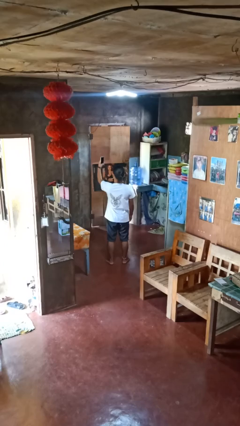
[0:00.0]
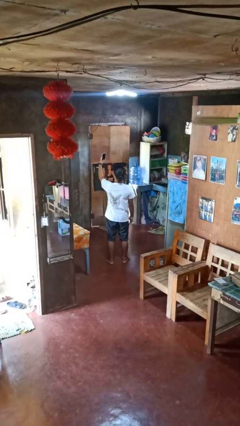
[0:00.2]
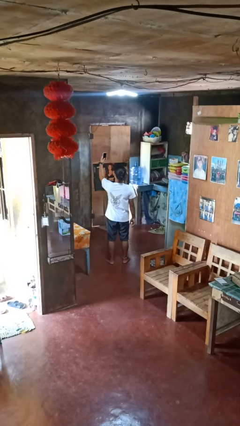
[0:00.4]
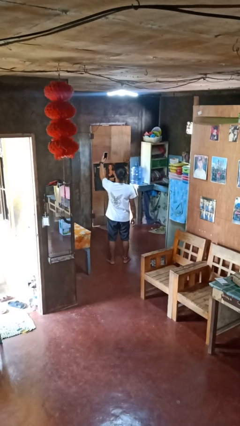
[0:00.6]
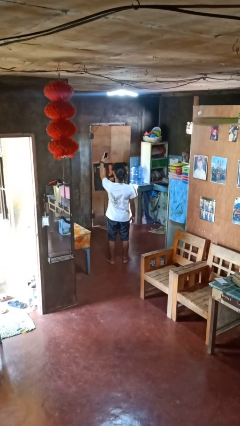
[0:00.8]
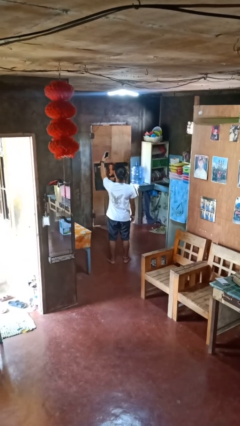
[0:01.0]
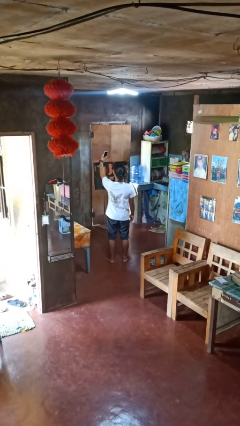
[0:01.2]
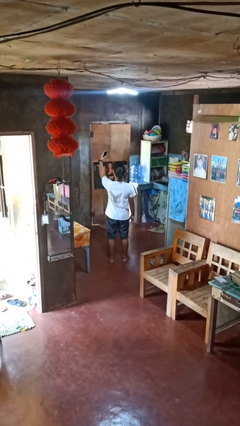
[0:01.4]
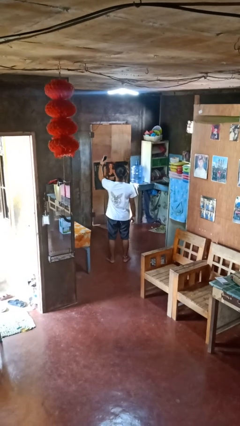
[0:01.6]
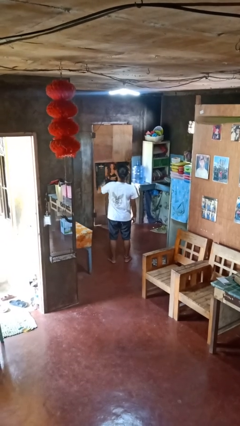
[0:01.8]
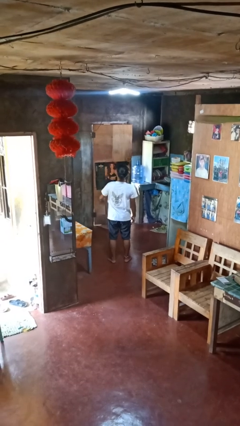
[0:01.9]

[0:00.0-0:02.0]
person takes selfie

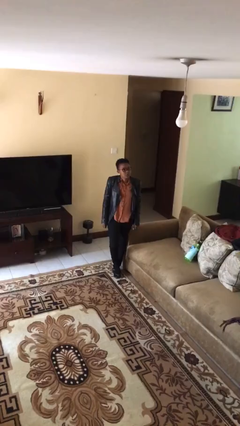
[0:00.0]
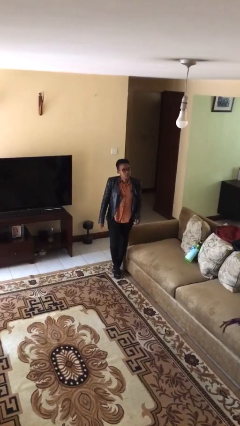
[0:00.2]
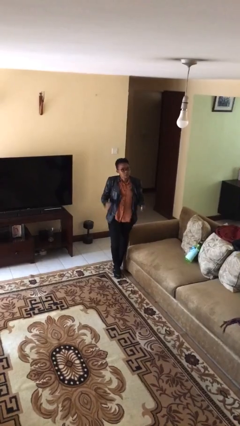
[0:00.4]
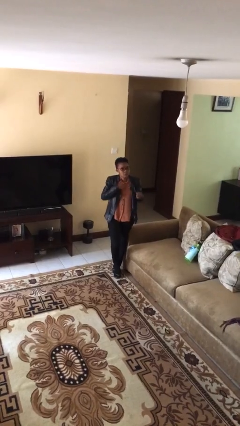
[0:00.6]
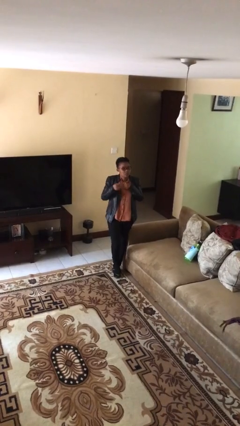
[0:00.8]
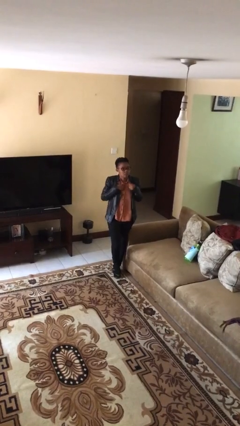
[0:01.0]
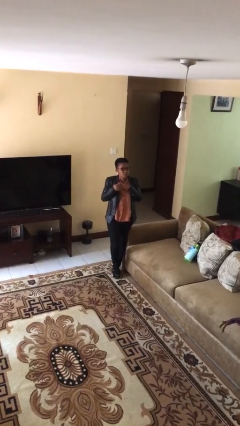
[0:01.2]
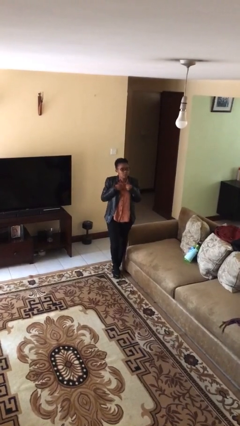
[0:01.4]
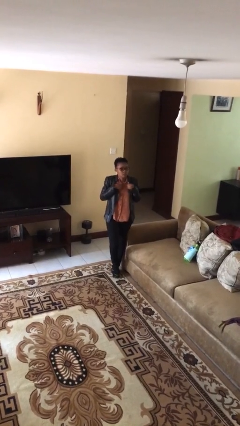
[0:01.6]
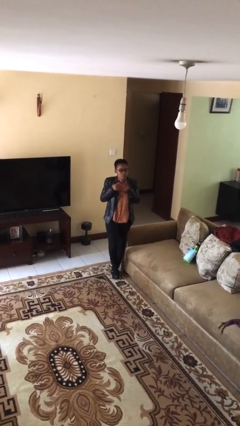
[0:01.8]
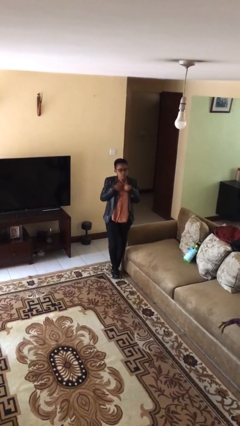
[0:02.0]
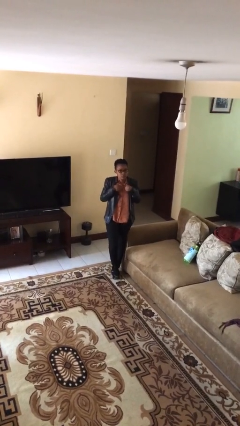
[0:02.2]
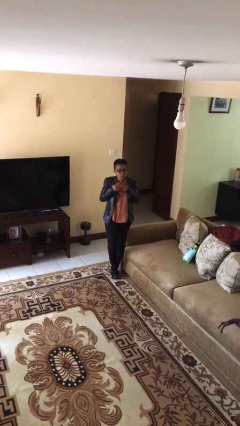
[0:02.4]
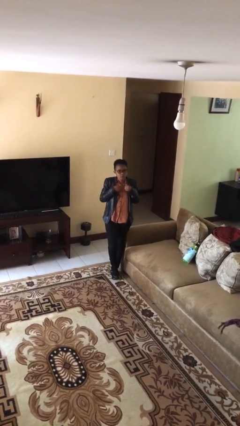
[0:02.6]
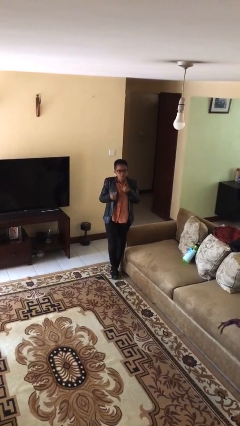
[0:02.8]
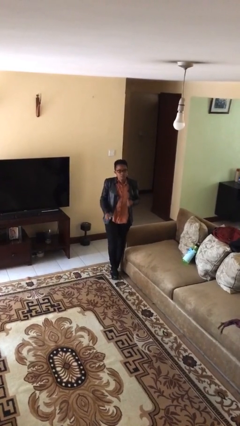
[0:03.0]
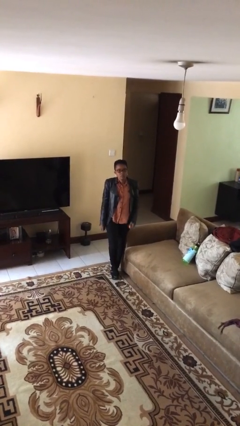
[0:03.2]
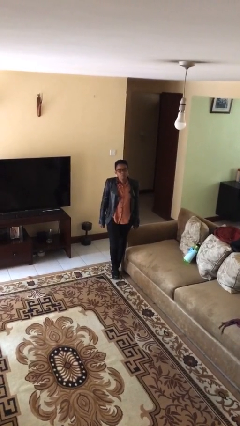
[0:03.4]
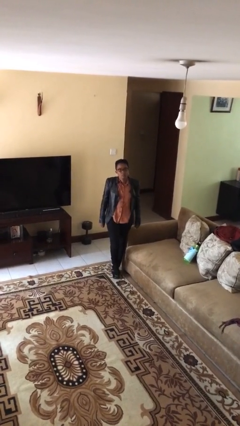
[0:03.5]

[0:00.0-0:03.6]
person drums on chest

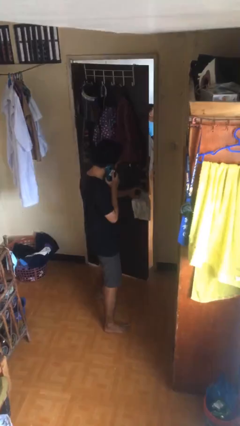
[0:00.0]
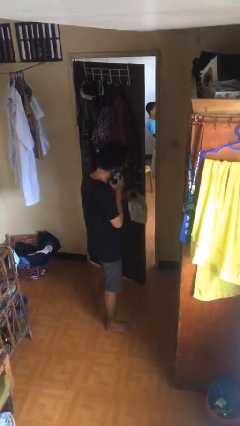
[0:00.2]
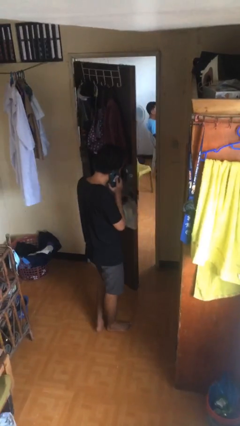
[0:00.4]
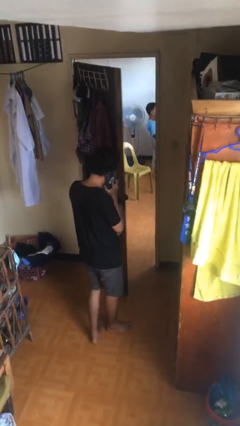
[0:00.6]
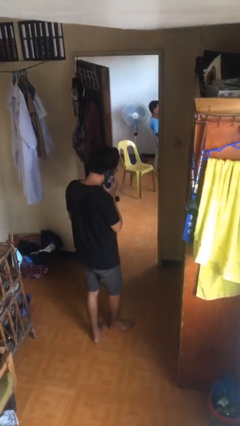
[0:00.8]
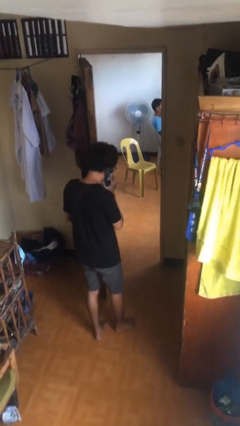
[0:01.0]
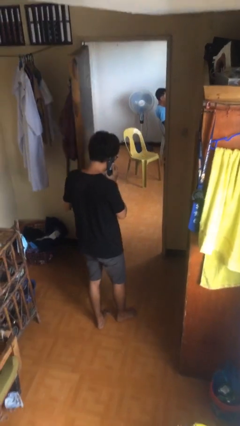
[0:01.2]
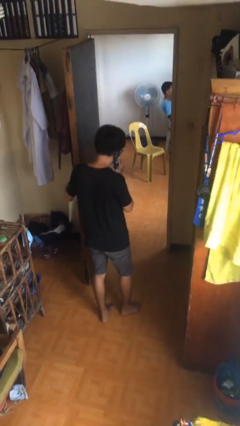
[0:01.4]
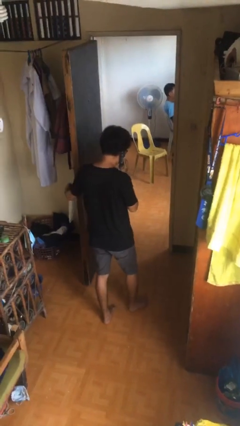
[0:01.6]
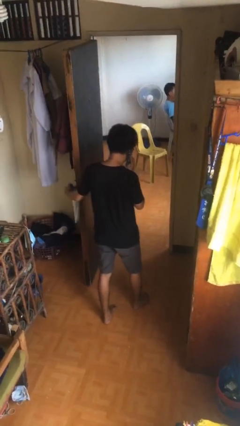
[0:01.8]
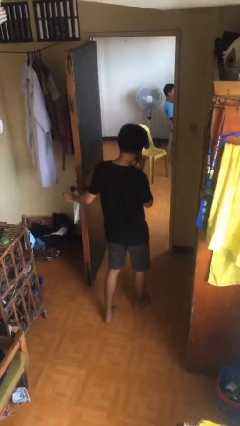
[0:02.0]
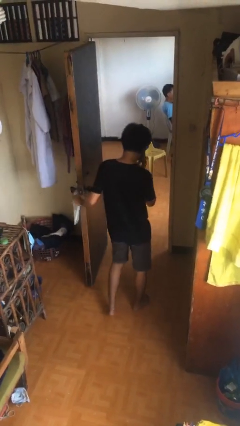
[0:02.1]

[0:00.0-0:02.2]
person opens facility door

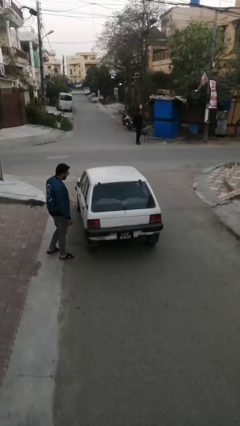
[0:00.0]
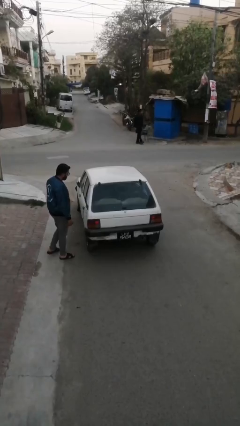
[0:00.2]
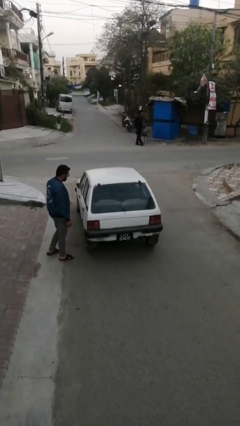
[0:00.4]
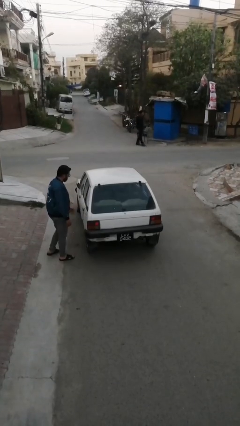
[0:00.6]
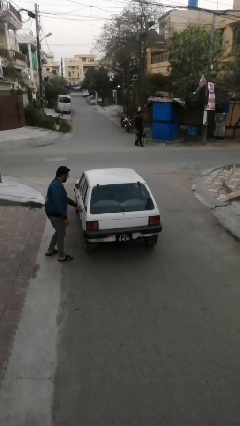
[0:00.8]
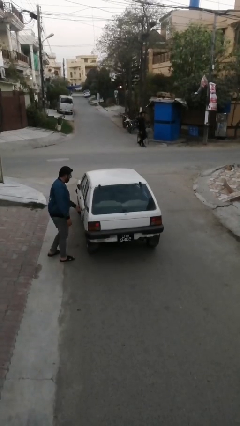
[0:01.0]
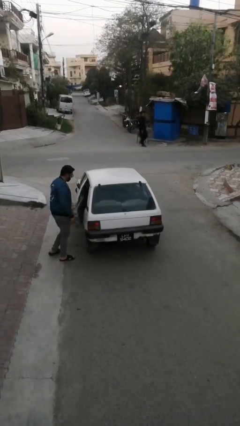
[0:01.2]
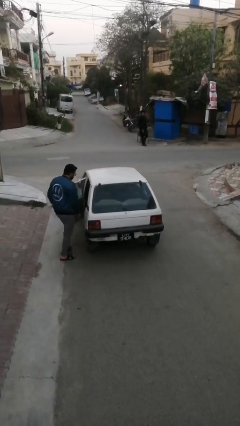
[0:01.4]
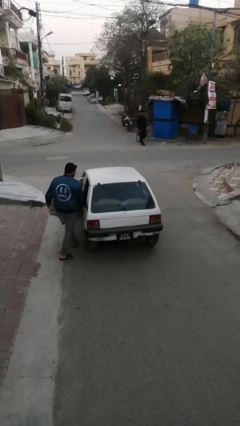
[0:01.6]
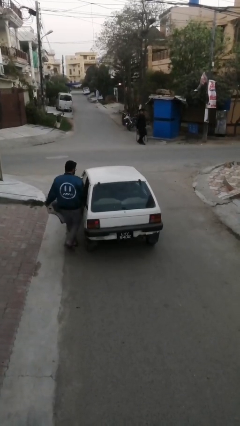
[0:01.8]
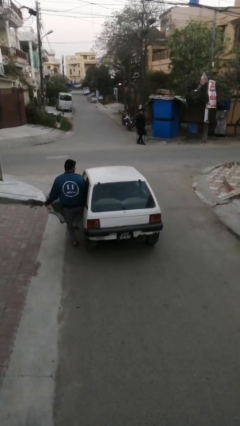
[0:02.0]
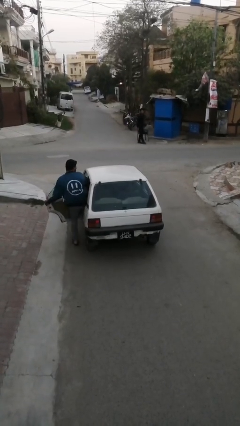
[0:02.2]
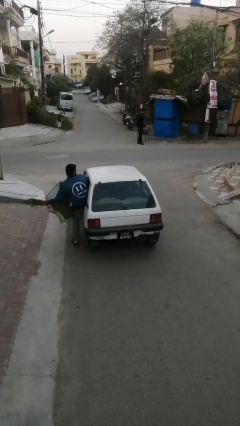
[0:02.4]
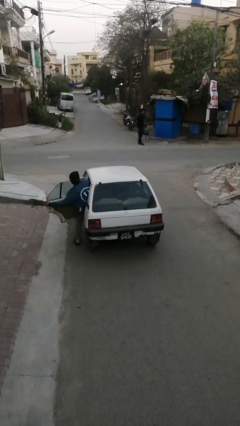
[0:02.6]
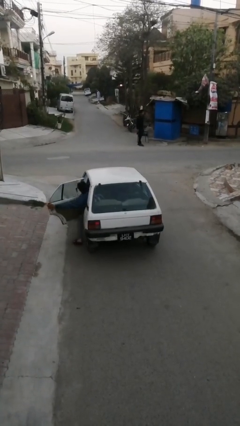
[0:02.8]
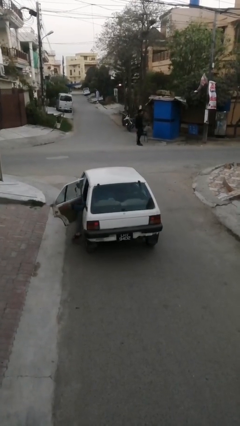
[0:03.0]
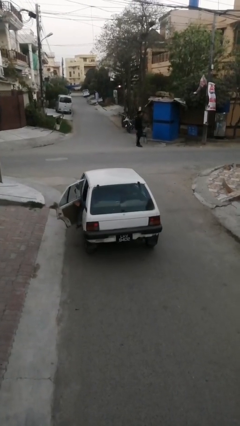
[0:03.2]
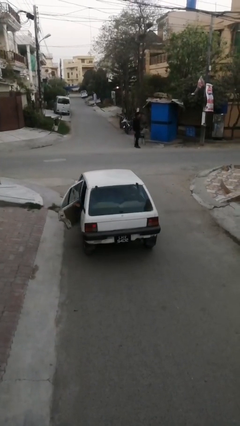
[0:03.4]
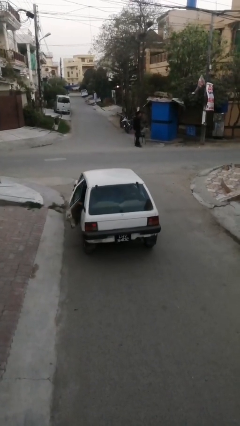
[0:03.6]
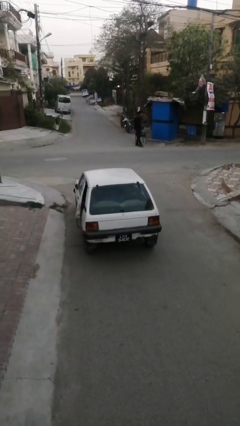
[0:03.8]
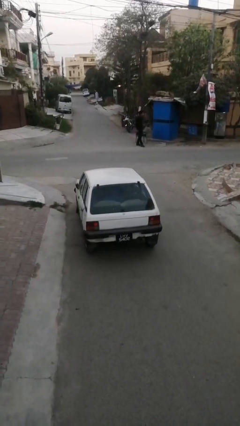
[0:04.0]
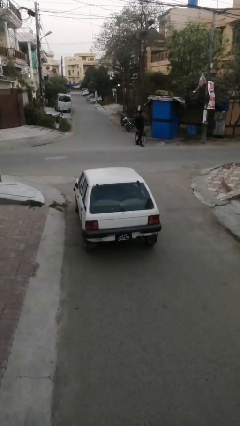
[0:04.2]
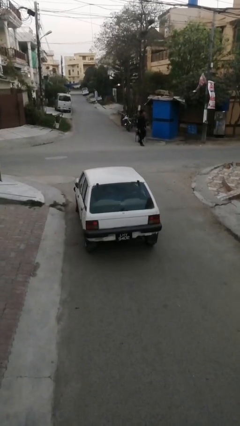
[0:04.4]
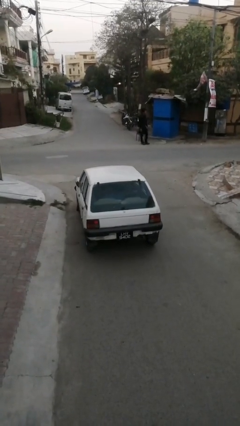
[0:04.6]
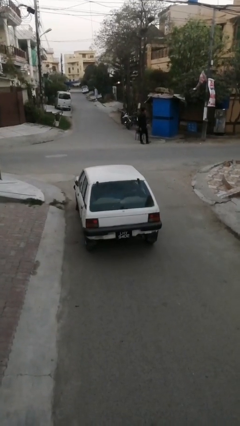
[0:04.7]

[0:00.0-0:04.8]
car picks up person

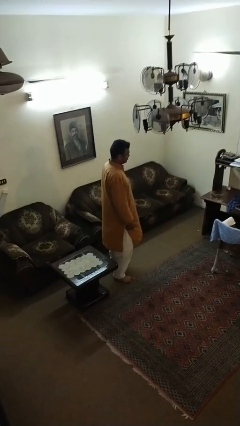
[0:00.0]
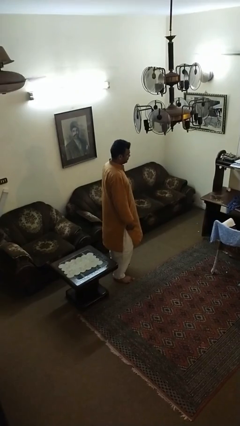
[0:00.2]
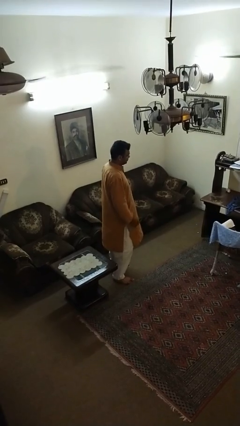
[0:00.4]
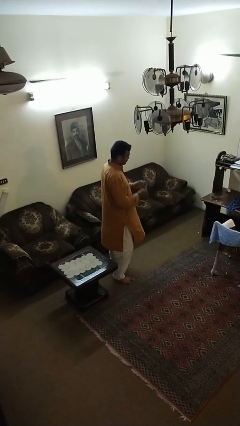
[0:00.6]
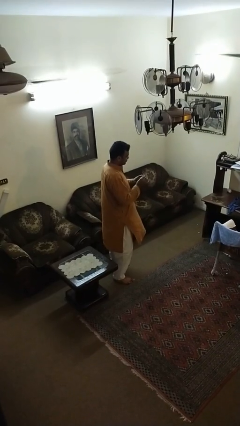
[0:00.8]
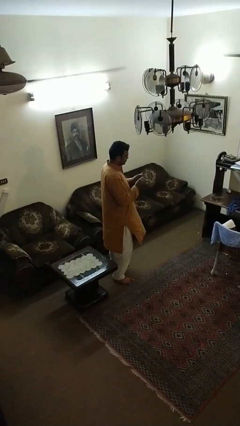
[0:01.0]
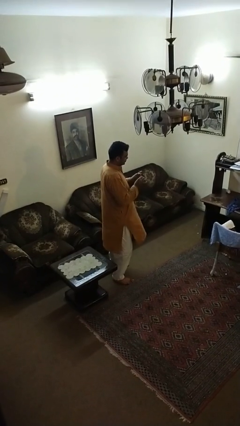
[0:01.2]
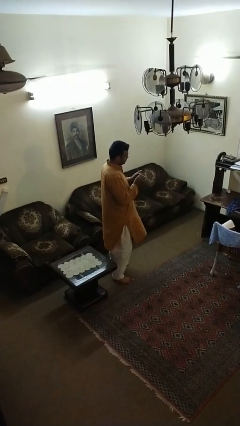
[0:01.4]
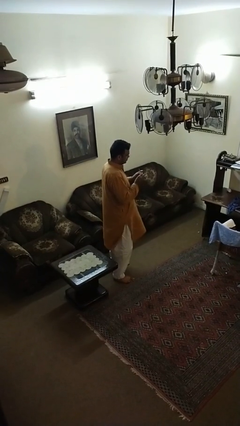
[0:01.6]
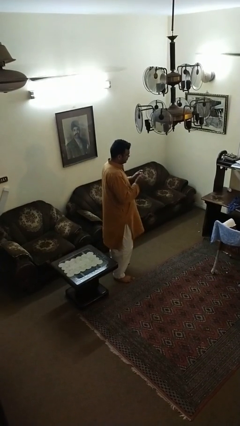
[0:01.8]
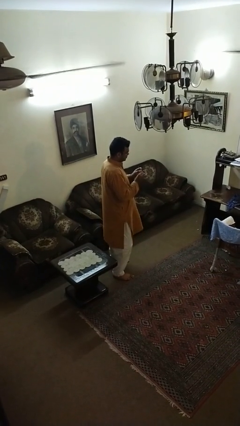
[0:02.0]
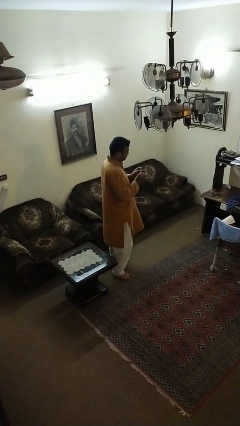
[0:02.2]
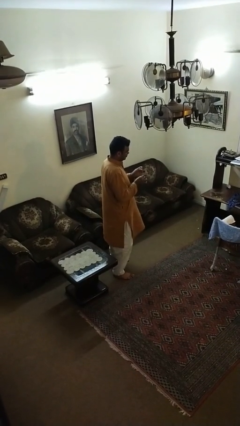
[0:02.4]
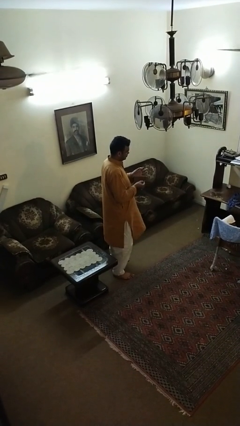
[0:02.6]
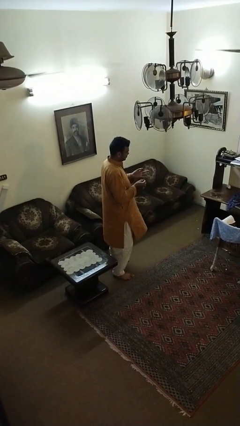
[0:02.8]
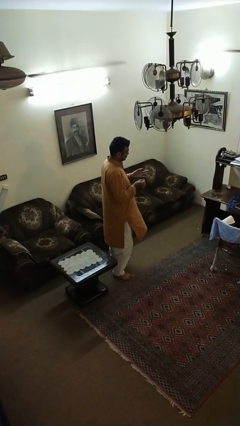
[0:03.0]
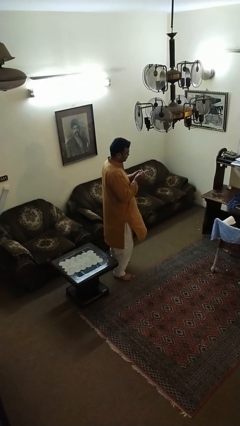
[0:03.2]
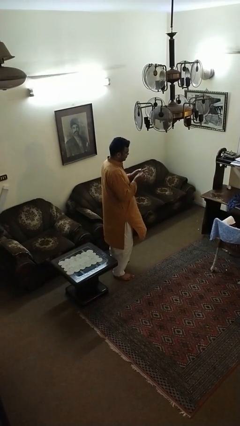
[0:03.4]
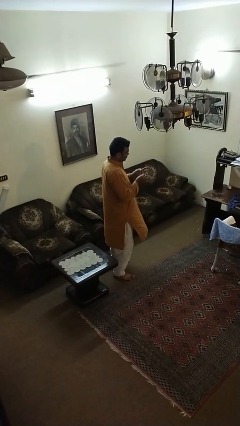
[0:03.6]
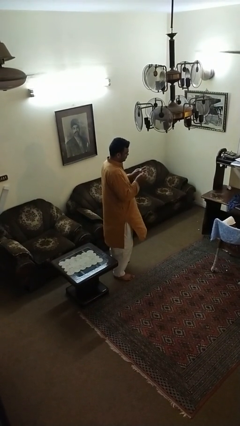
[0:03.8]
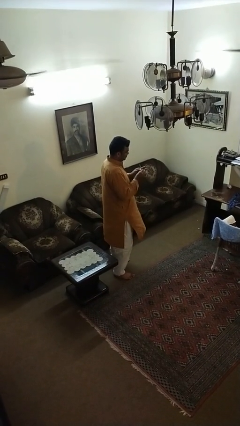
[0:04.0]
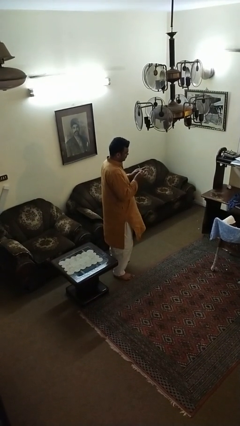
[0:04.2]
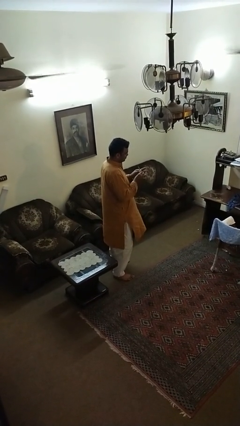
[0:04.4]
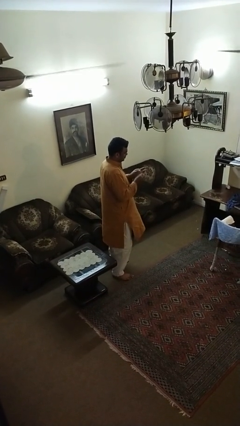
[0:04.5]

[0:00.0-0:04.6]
person files fingernails

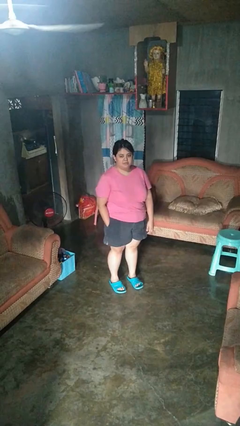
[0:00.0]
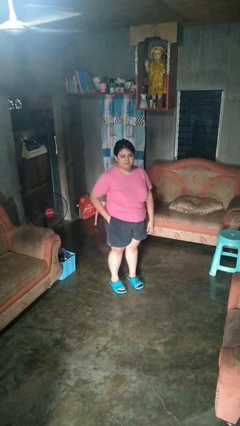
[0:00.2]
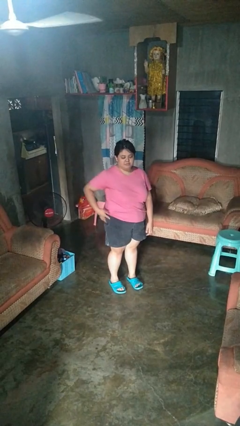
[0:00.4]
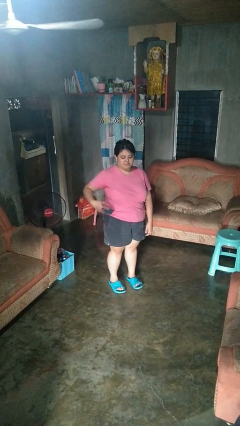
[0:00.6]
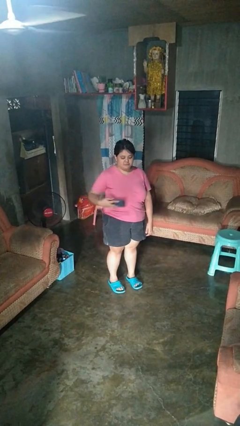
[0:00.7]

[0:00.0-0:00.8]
person takes phone from pocket
